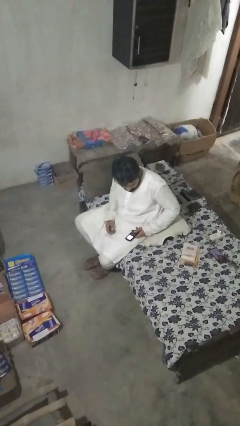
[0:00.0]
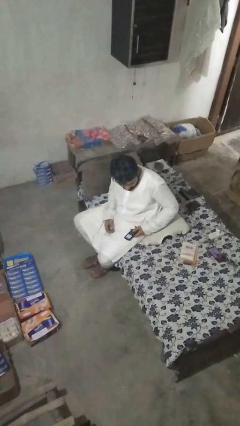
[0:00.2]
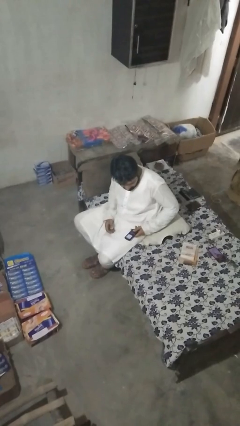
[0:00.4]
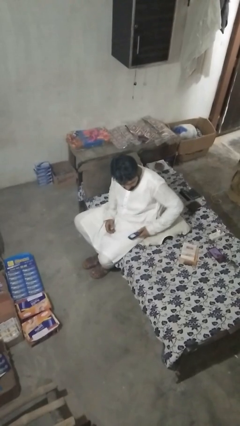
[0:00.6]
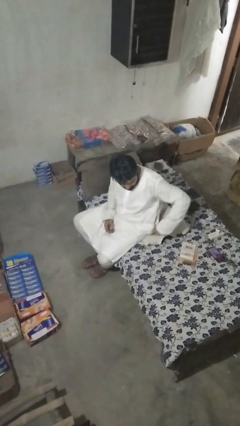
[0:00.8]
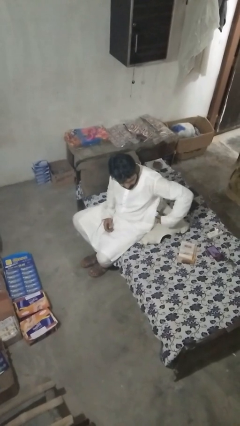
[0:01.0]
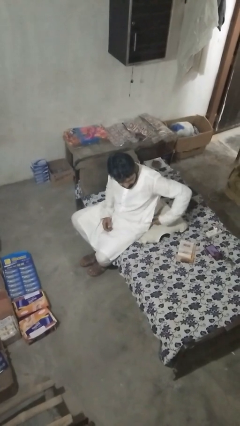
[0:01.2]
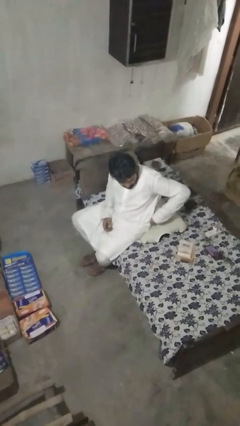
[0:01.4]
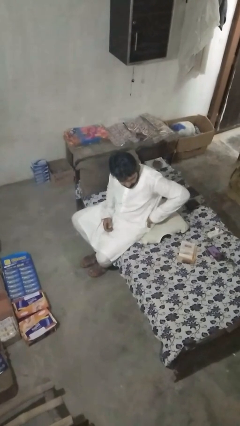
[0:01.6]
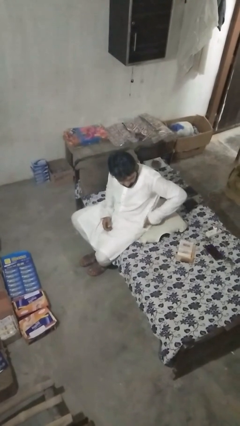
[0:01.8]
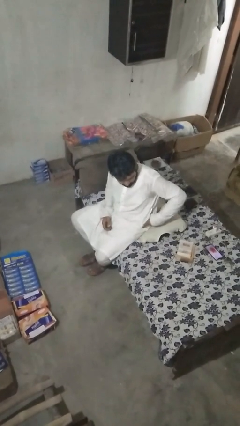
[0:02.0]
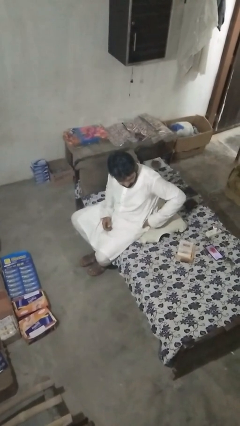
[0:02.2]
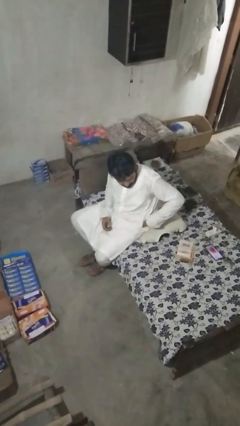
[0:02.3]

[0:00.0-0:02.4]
person puts phone into pocket

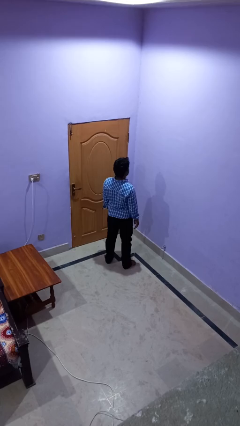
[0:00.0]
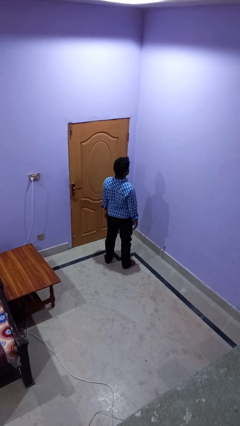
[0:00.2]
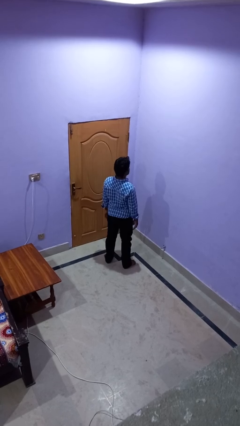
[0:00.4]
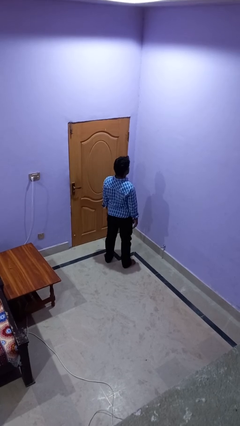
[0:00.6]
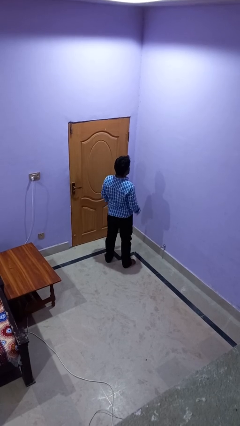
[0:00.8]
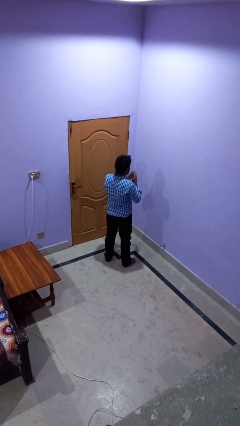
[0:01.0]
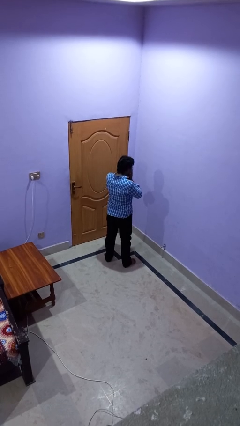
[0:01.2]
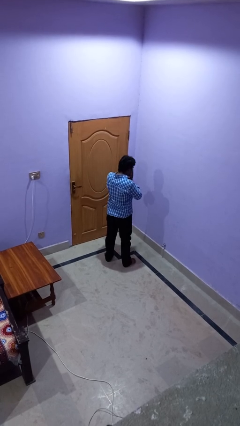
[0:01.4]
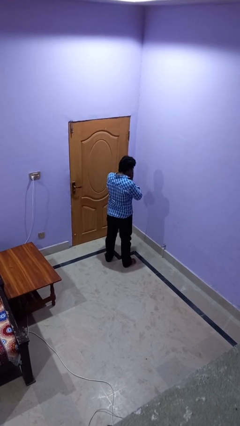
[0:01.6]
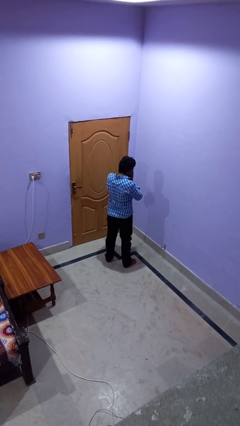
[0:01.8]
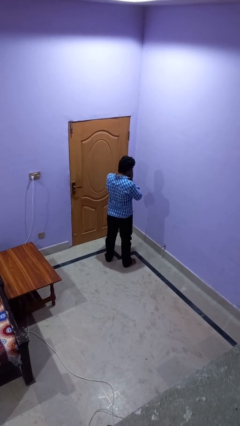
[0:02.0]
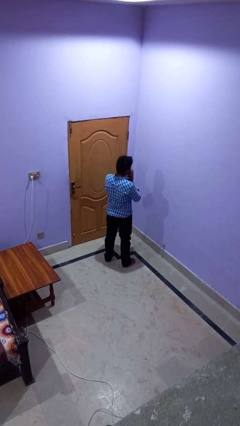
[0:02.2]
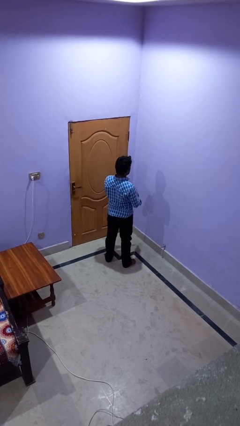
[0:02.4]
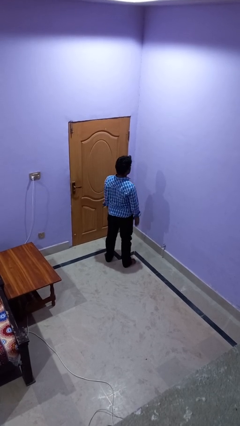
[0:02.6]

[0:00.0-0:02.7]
person sneezes into hand

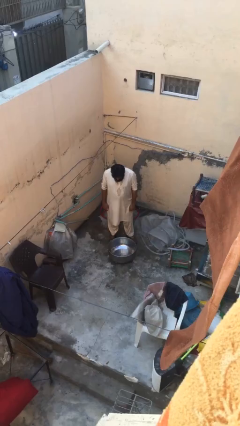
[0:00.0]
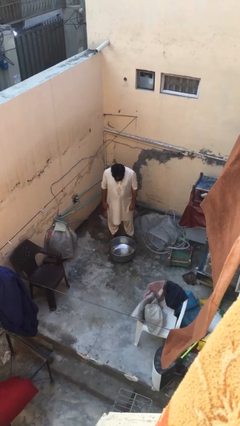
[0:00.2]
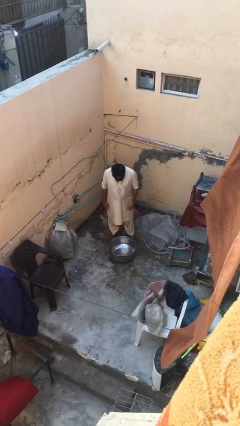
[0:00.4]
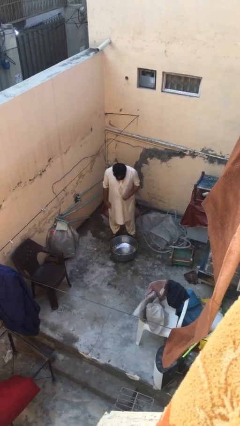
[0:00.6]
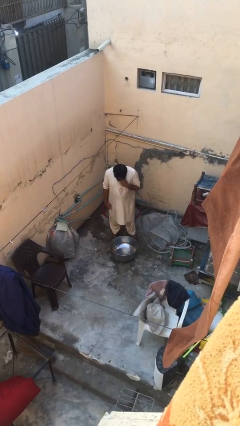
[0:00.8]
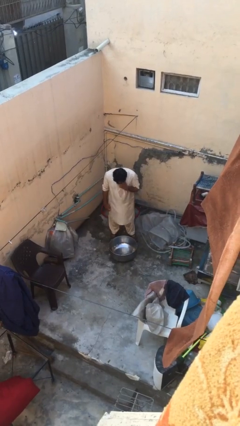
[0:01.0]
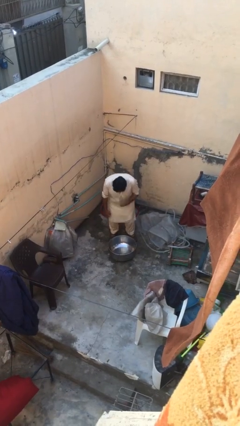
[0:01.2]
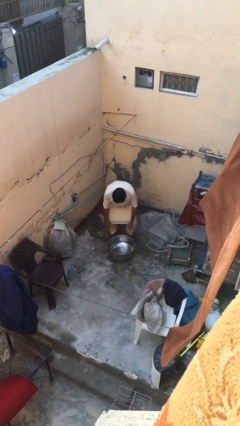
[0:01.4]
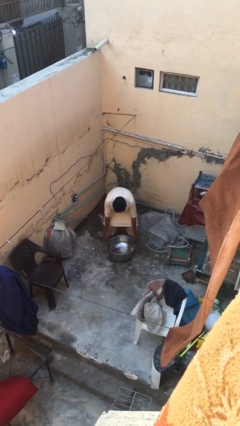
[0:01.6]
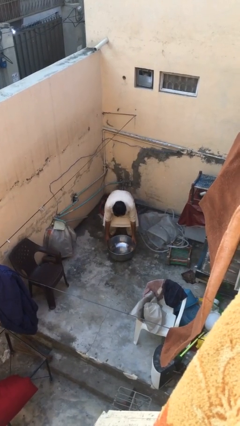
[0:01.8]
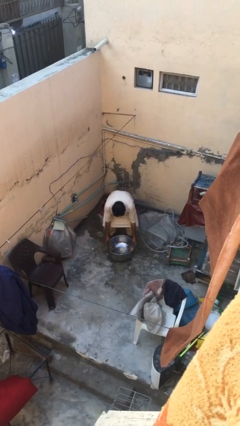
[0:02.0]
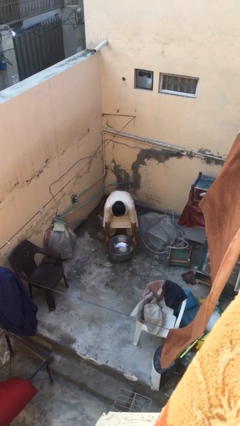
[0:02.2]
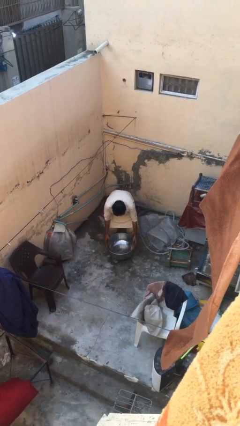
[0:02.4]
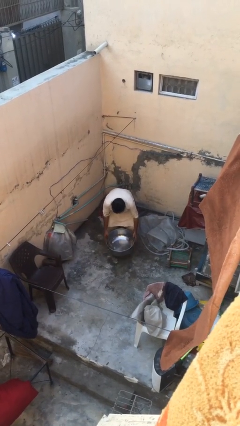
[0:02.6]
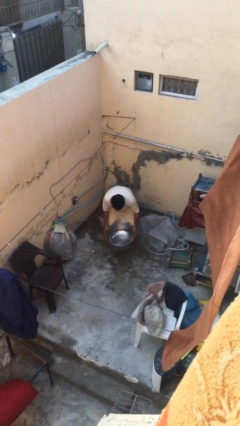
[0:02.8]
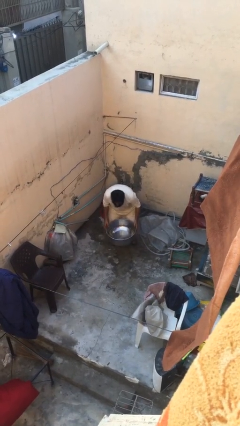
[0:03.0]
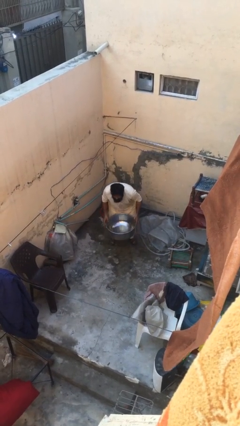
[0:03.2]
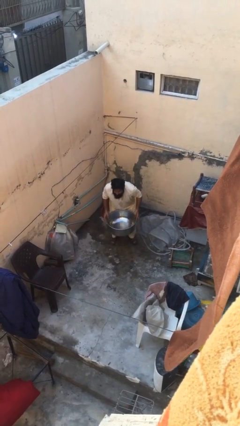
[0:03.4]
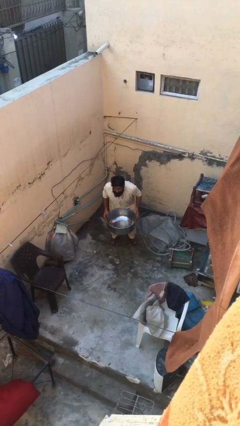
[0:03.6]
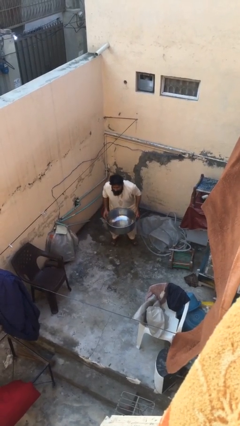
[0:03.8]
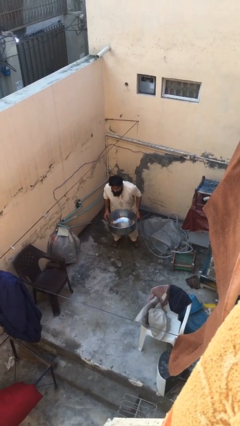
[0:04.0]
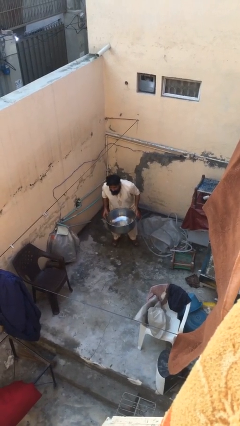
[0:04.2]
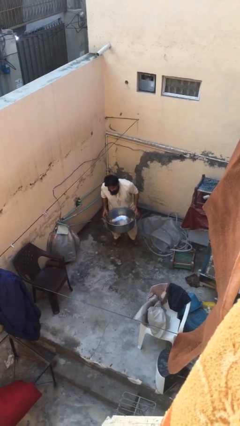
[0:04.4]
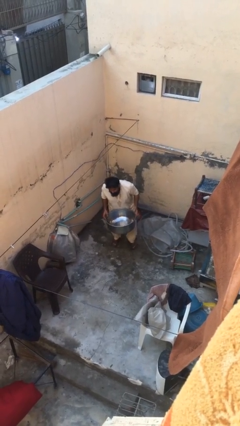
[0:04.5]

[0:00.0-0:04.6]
person picks up object from floor

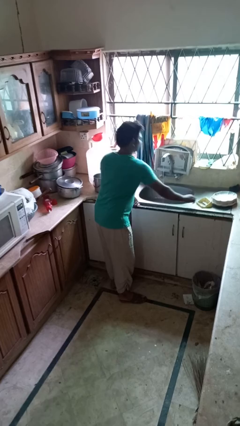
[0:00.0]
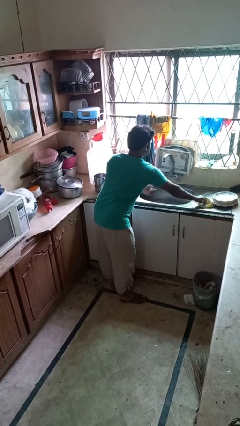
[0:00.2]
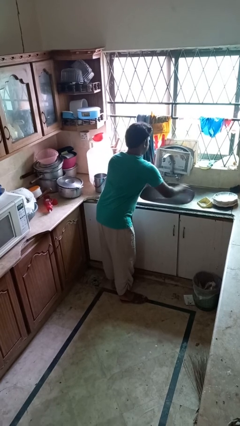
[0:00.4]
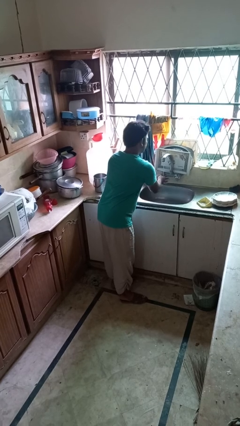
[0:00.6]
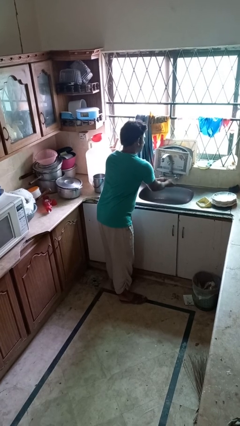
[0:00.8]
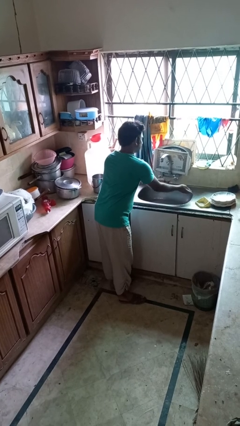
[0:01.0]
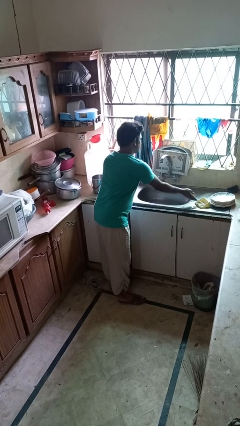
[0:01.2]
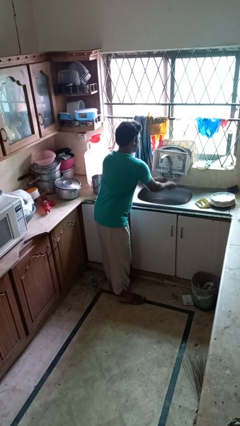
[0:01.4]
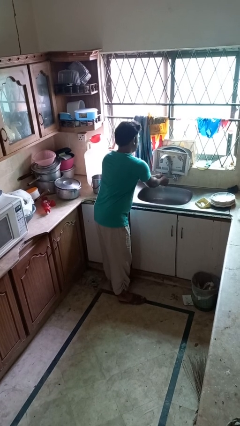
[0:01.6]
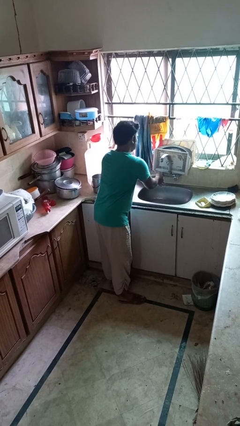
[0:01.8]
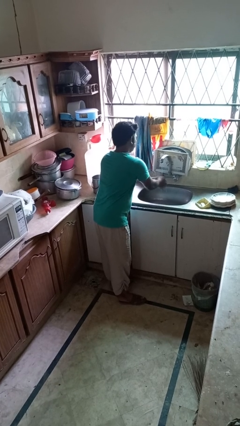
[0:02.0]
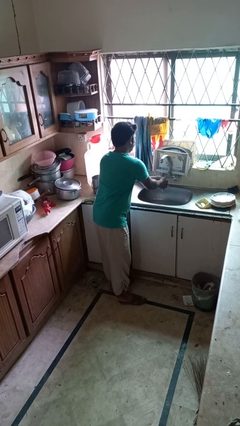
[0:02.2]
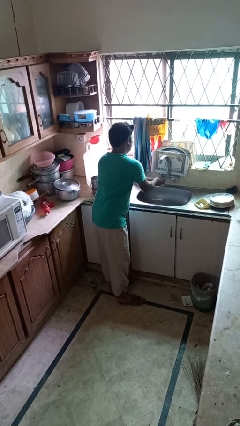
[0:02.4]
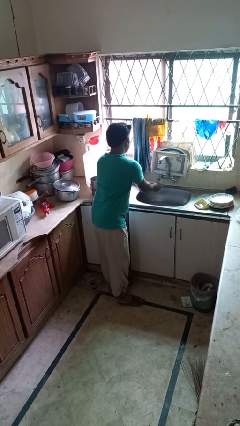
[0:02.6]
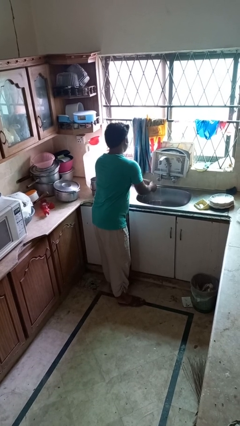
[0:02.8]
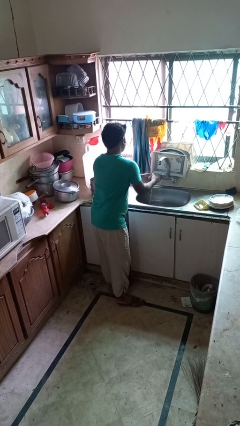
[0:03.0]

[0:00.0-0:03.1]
person washes hands

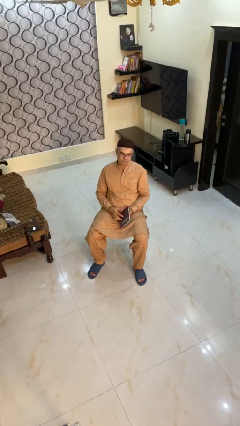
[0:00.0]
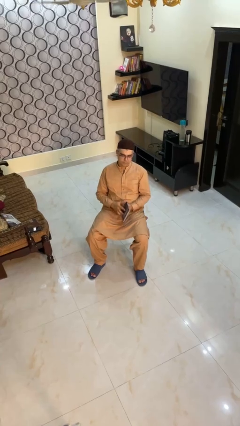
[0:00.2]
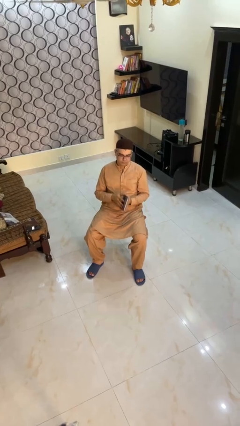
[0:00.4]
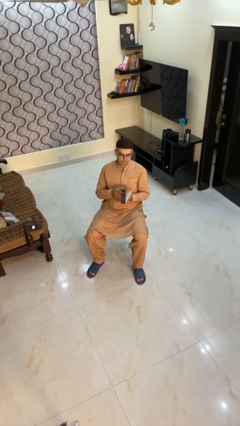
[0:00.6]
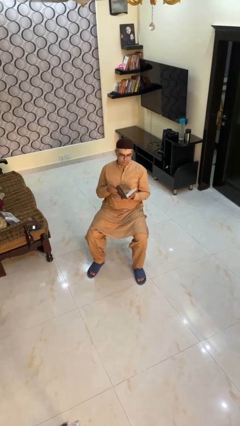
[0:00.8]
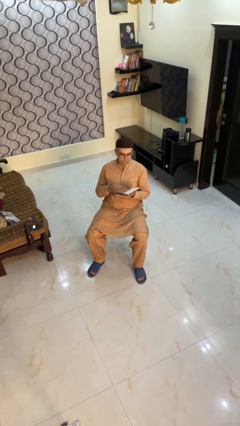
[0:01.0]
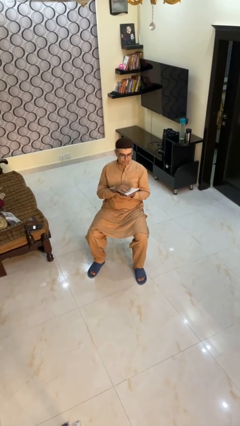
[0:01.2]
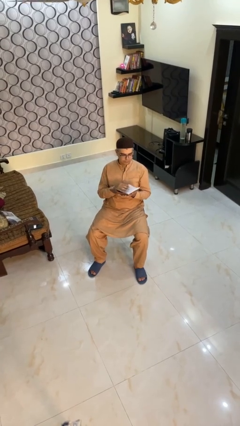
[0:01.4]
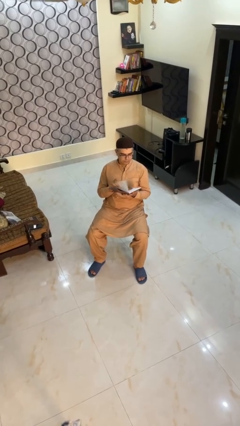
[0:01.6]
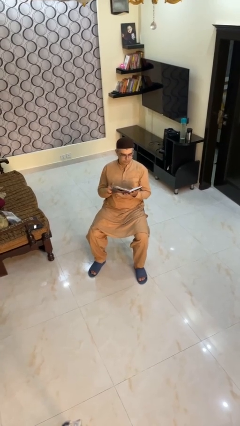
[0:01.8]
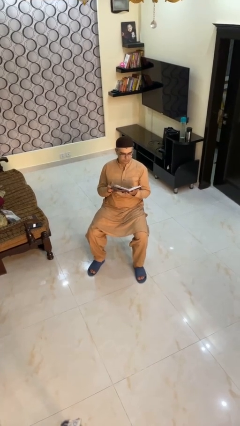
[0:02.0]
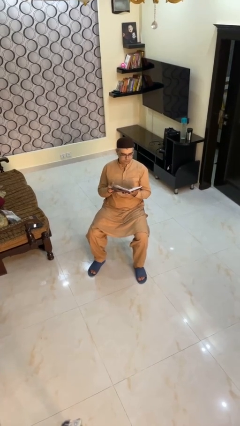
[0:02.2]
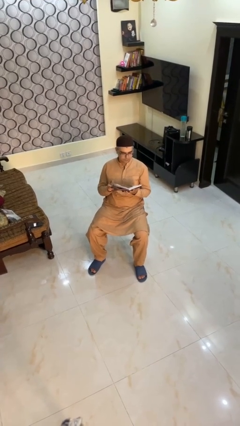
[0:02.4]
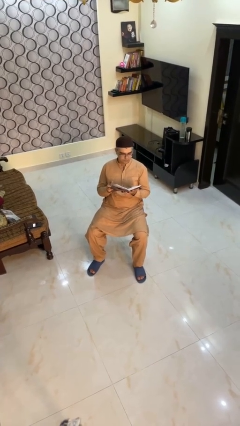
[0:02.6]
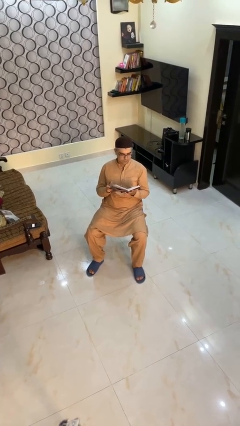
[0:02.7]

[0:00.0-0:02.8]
person reads book

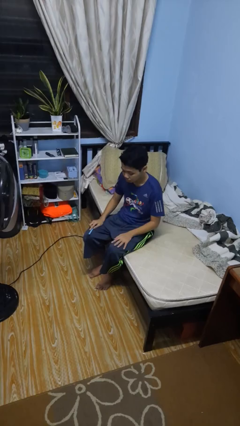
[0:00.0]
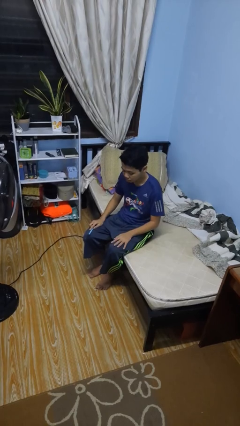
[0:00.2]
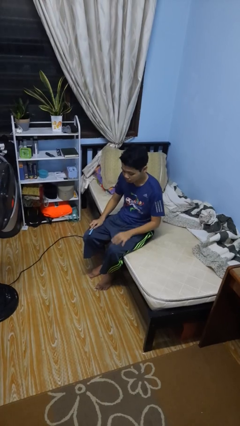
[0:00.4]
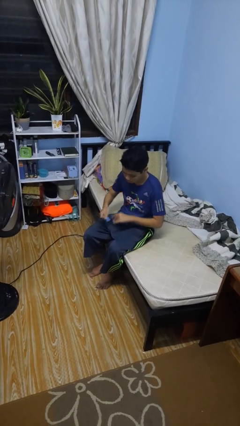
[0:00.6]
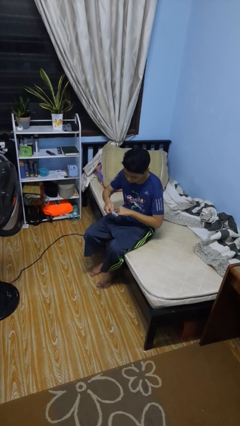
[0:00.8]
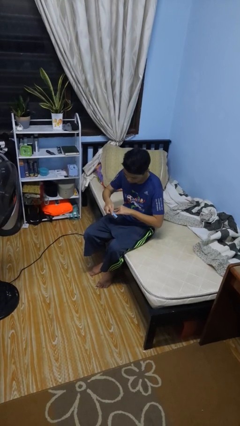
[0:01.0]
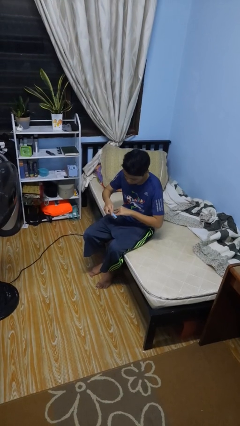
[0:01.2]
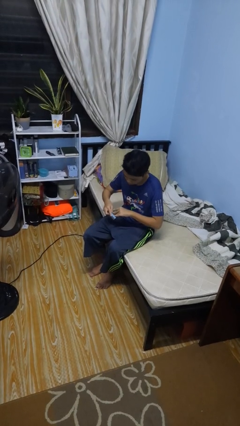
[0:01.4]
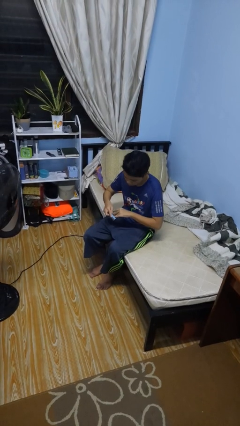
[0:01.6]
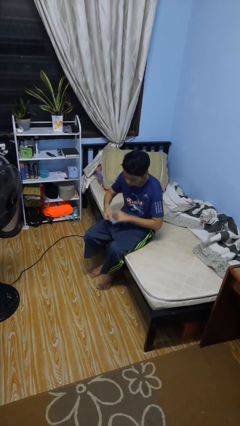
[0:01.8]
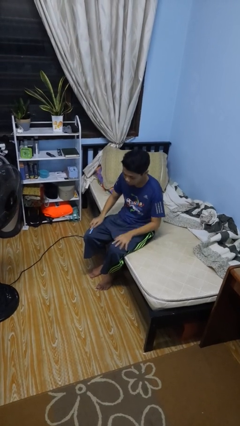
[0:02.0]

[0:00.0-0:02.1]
person files fingernails
